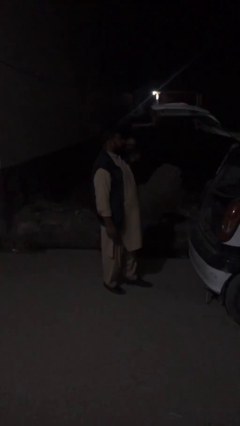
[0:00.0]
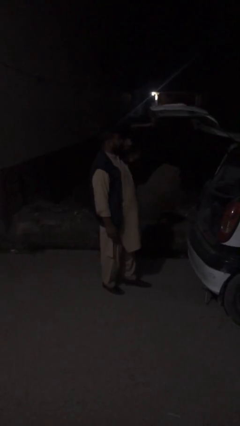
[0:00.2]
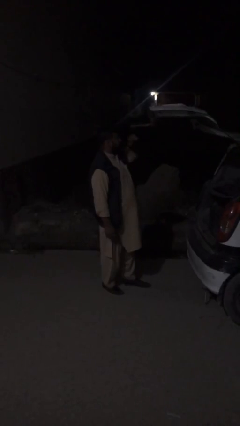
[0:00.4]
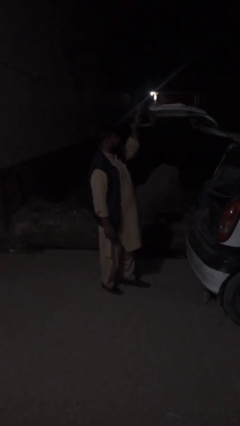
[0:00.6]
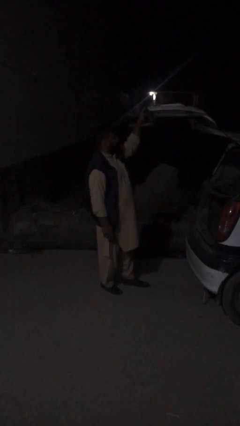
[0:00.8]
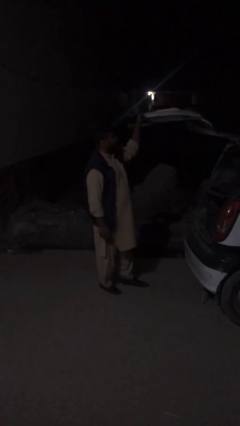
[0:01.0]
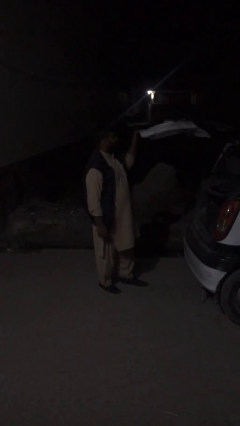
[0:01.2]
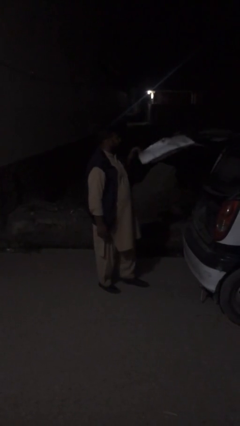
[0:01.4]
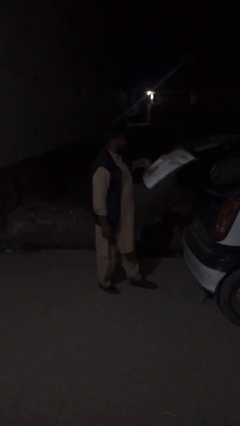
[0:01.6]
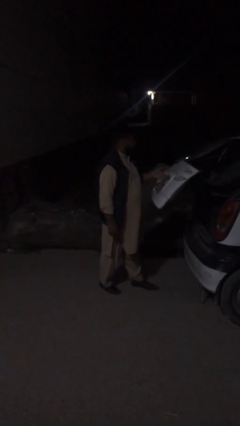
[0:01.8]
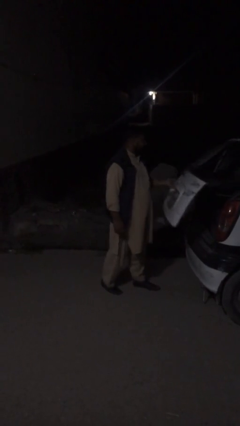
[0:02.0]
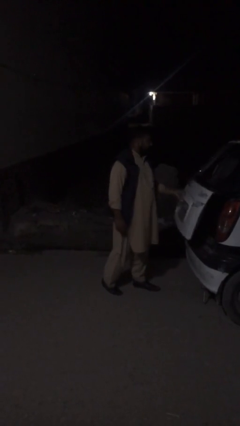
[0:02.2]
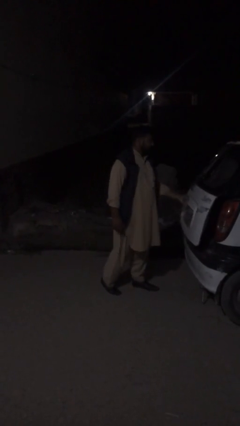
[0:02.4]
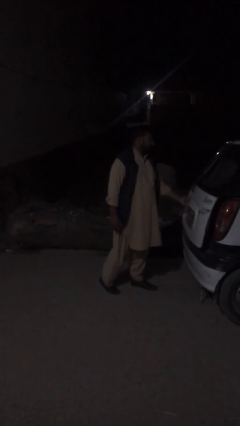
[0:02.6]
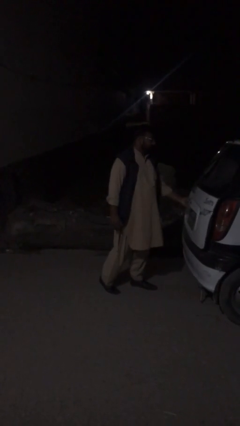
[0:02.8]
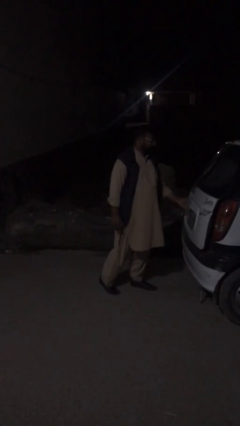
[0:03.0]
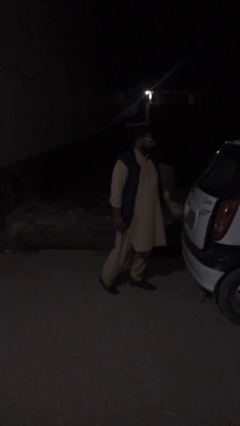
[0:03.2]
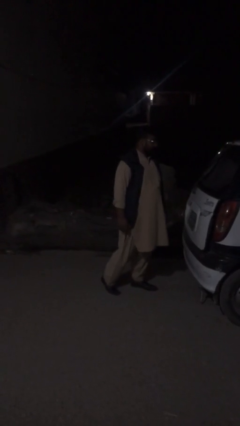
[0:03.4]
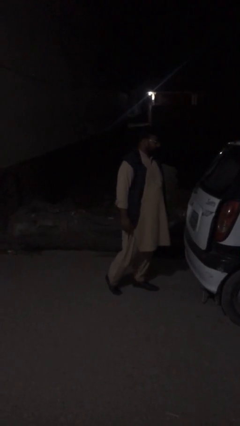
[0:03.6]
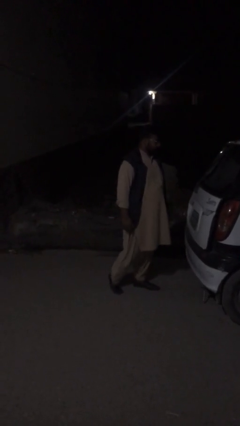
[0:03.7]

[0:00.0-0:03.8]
person closes car trunk

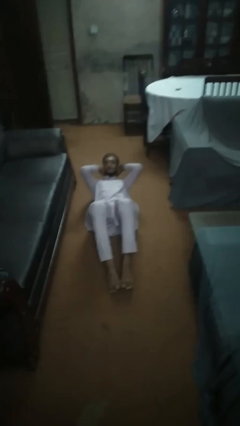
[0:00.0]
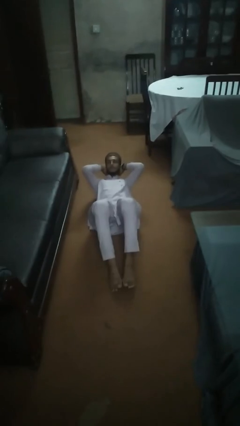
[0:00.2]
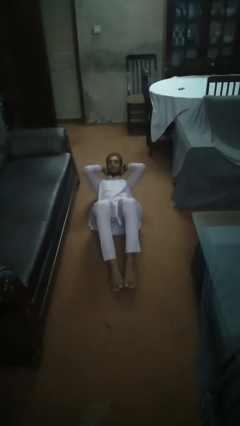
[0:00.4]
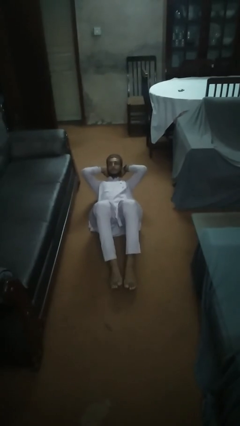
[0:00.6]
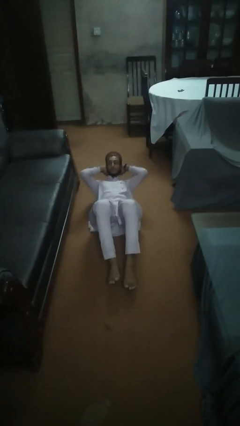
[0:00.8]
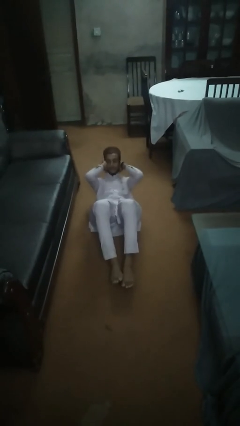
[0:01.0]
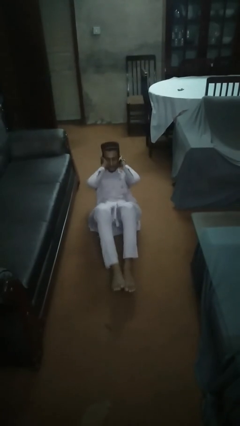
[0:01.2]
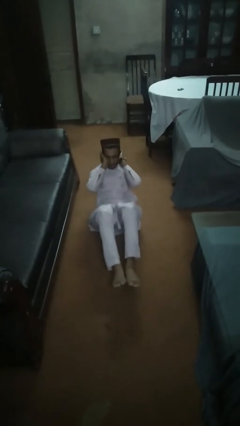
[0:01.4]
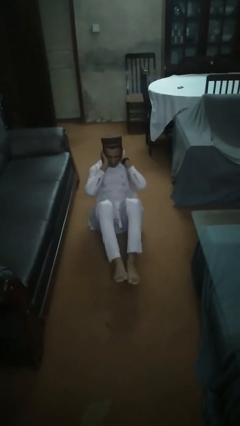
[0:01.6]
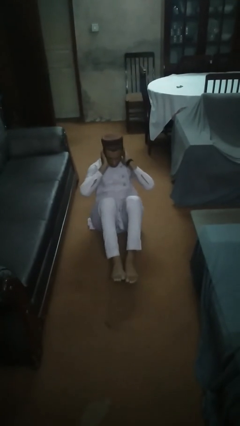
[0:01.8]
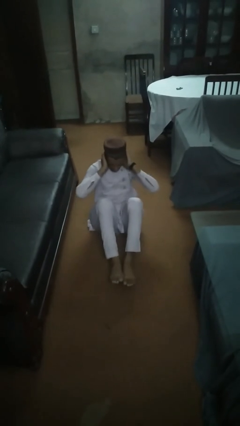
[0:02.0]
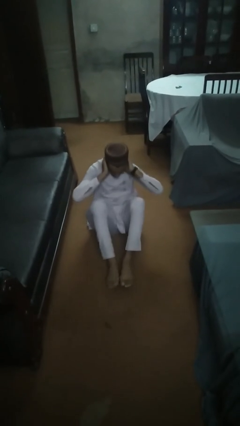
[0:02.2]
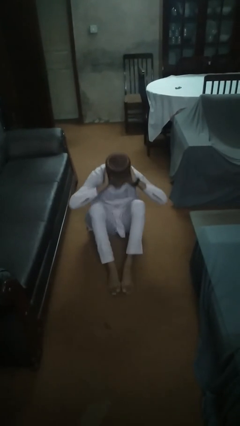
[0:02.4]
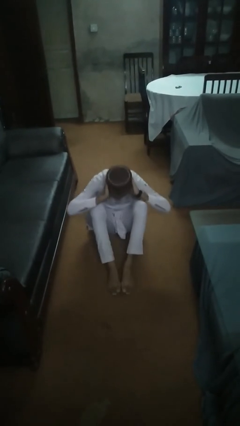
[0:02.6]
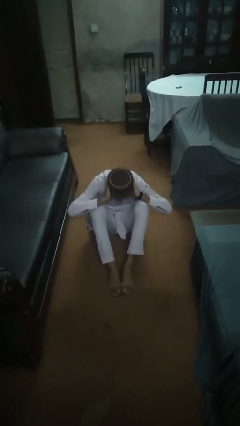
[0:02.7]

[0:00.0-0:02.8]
person exercises with situp

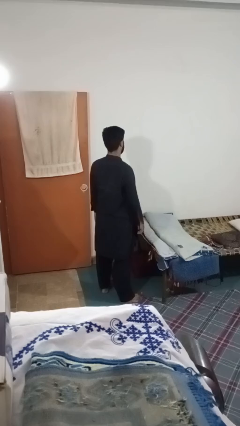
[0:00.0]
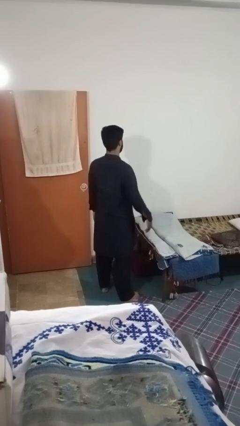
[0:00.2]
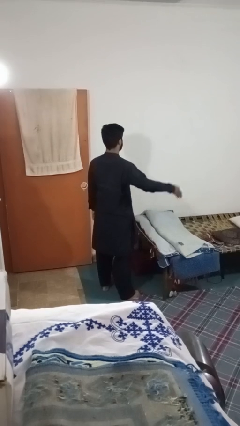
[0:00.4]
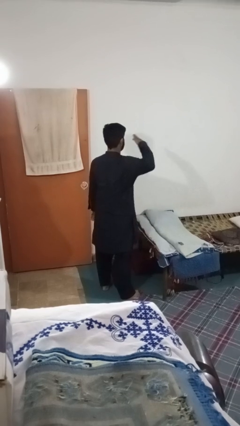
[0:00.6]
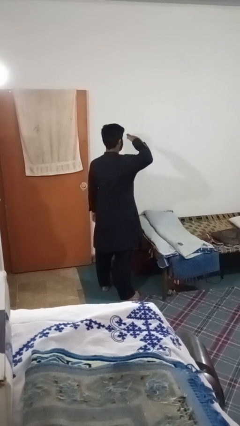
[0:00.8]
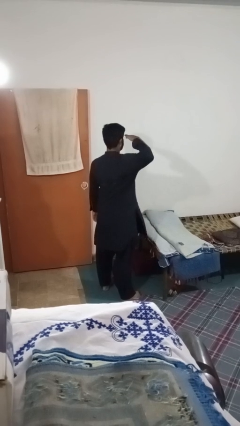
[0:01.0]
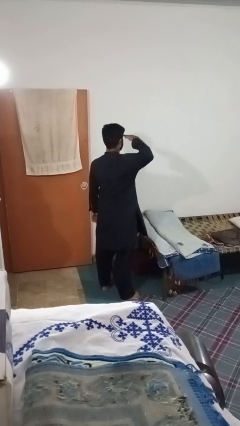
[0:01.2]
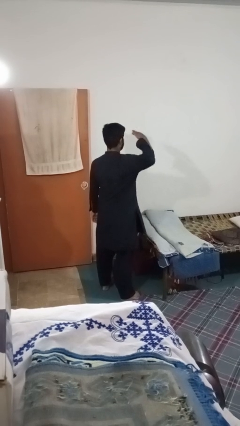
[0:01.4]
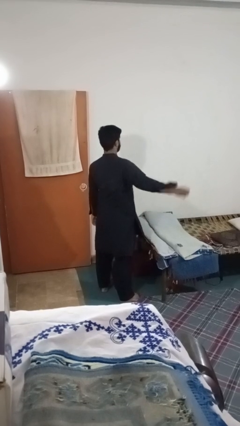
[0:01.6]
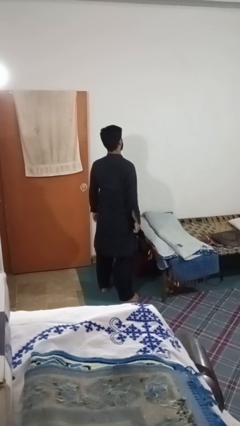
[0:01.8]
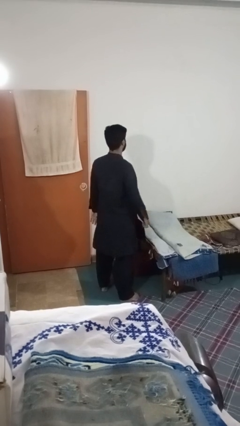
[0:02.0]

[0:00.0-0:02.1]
person salutes

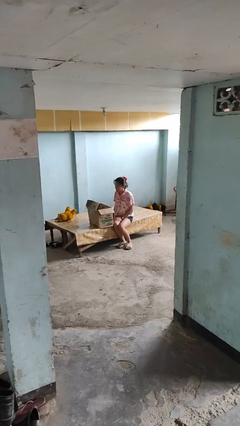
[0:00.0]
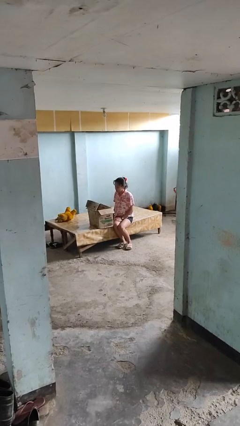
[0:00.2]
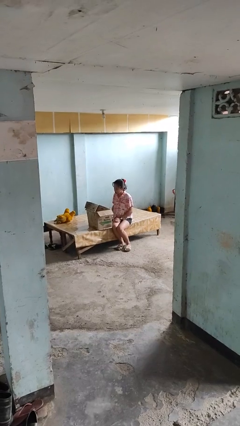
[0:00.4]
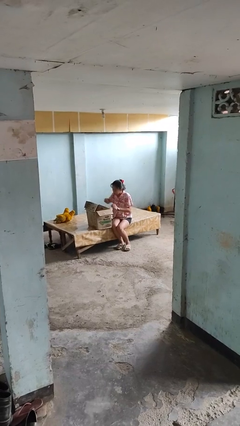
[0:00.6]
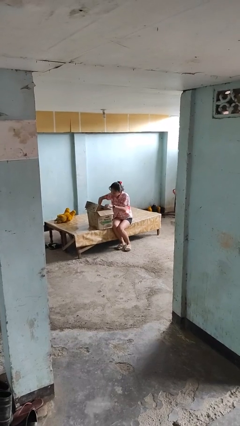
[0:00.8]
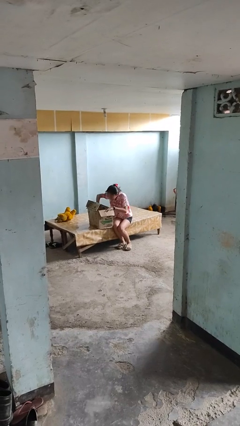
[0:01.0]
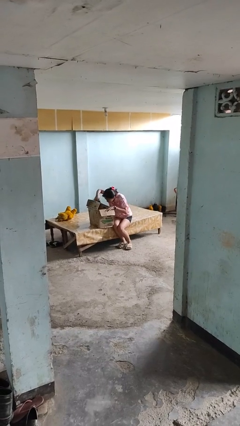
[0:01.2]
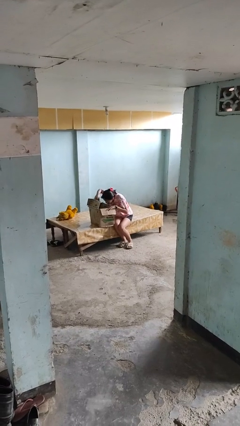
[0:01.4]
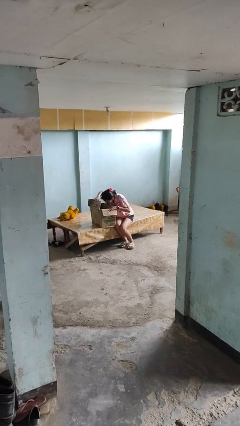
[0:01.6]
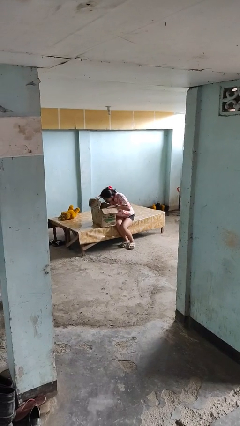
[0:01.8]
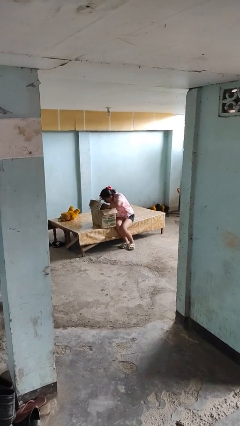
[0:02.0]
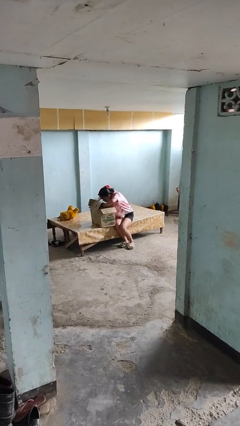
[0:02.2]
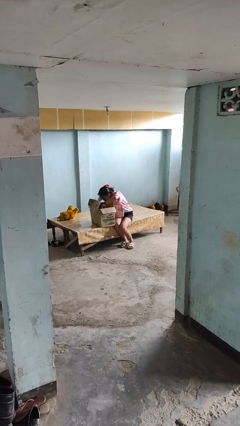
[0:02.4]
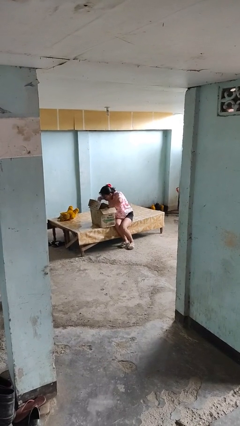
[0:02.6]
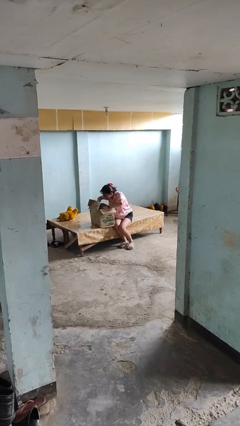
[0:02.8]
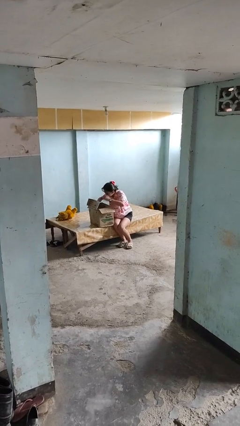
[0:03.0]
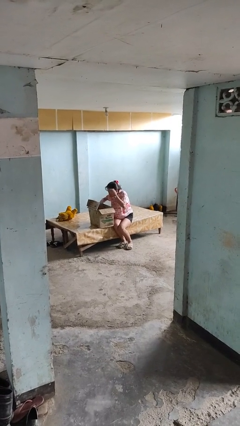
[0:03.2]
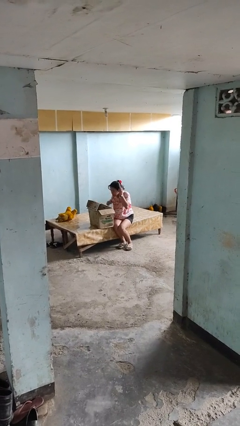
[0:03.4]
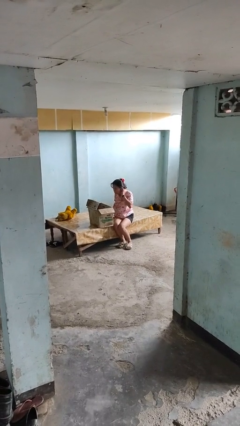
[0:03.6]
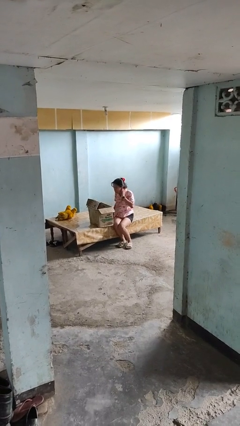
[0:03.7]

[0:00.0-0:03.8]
person searches in box

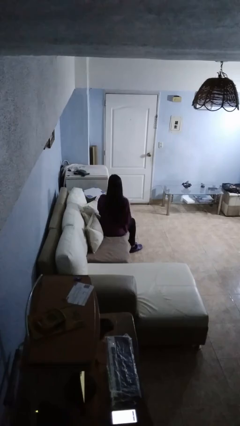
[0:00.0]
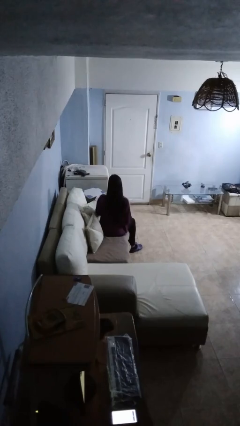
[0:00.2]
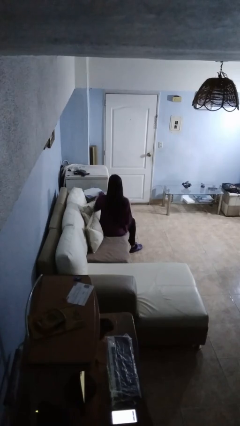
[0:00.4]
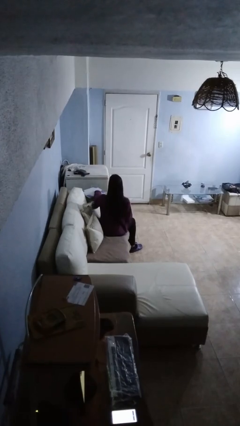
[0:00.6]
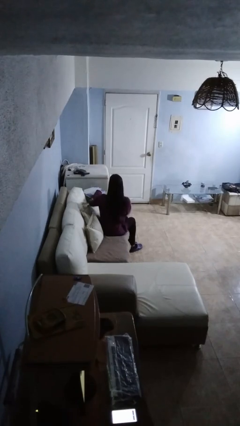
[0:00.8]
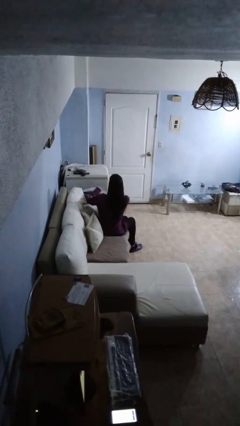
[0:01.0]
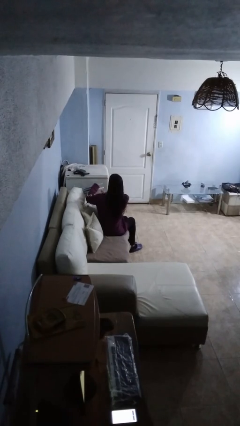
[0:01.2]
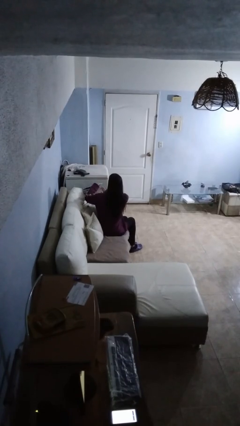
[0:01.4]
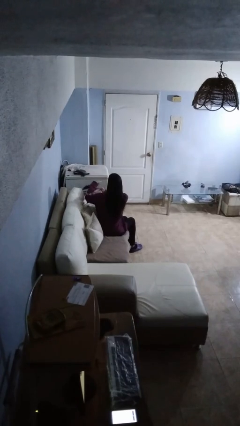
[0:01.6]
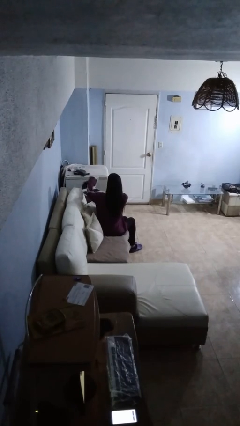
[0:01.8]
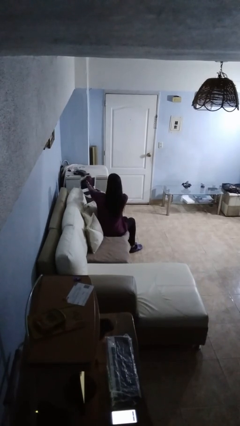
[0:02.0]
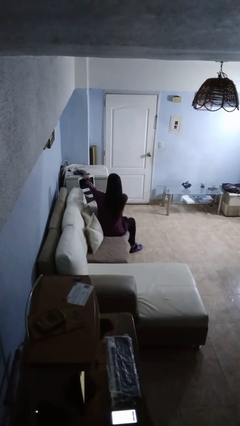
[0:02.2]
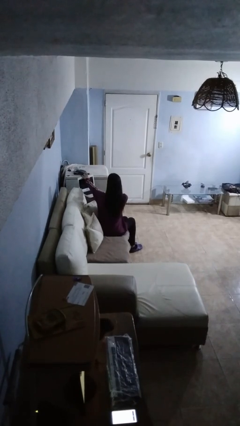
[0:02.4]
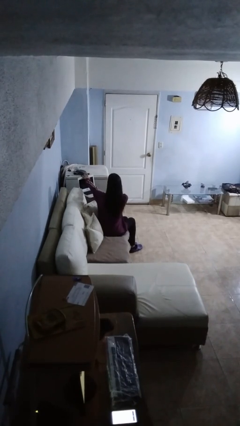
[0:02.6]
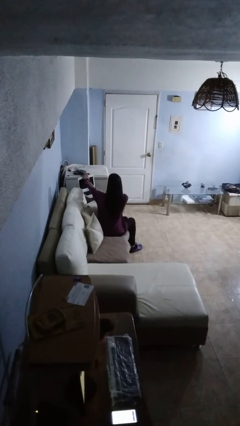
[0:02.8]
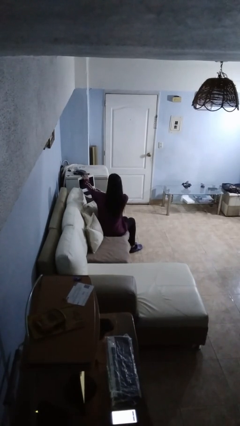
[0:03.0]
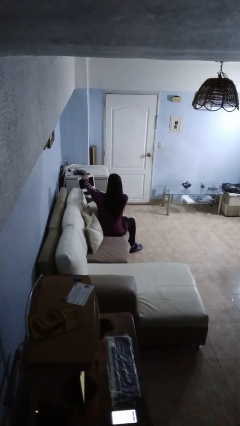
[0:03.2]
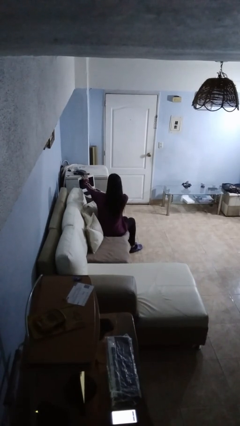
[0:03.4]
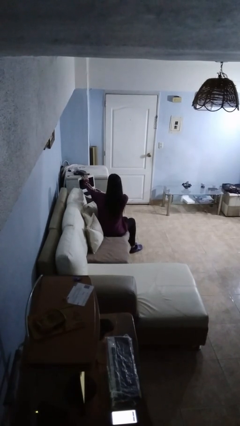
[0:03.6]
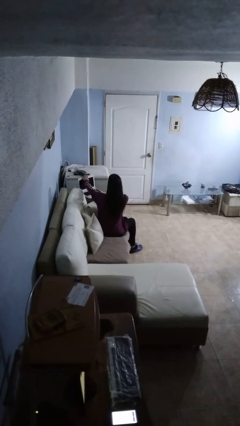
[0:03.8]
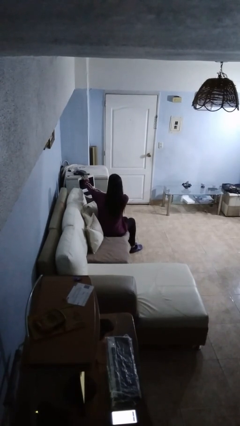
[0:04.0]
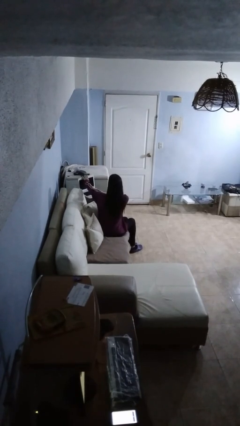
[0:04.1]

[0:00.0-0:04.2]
person opens laptop

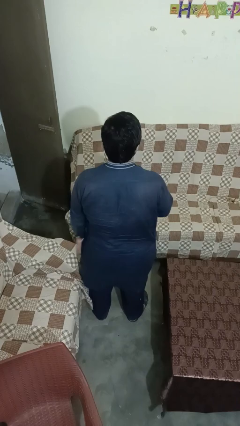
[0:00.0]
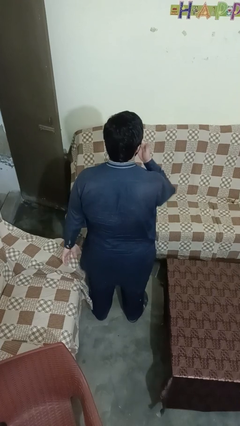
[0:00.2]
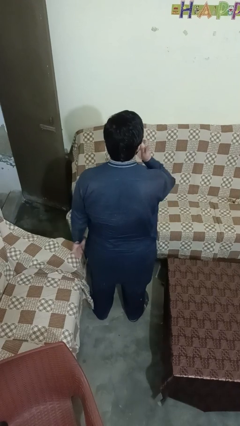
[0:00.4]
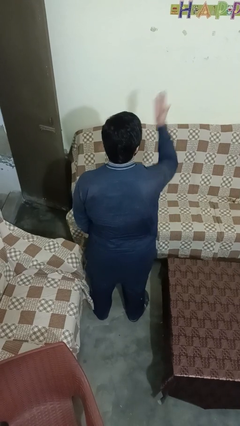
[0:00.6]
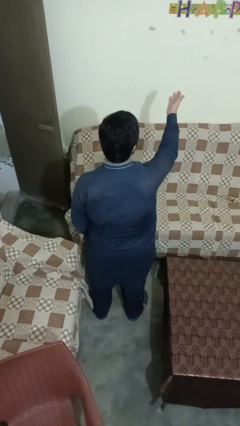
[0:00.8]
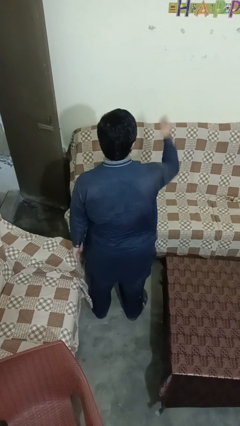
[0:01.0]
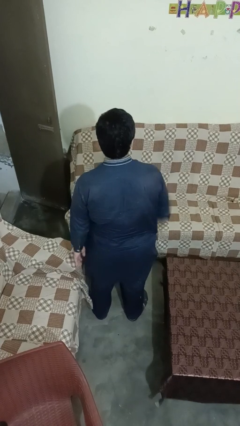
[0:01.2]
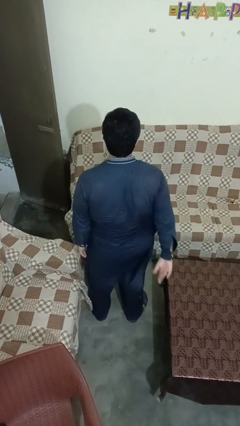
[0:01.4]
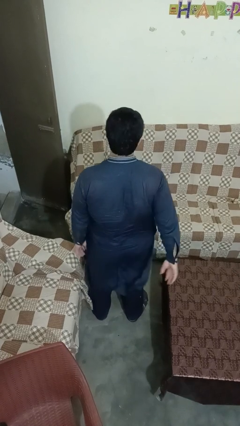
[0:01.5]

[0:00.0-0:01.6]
person gestures blow kiss
